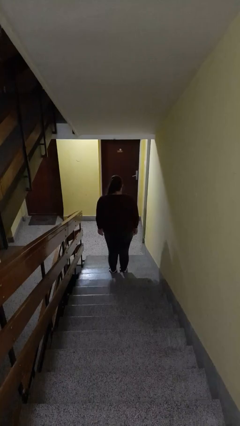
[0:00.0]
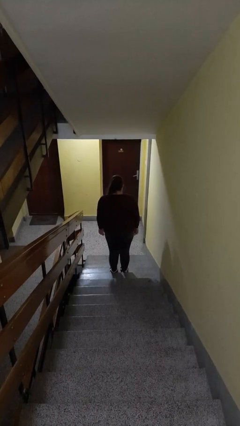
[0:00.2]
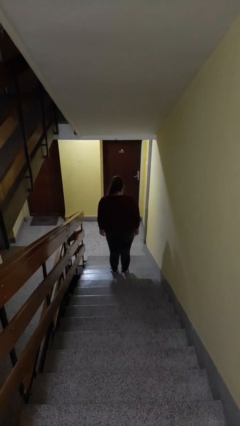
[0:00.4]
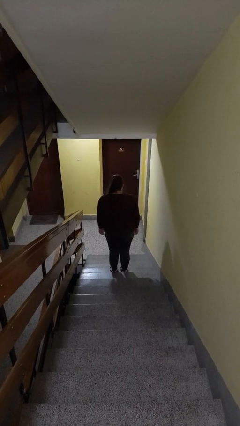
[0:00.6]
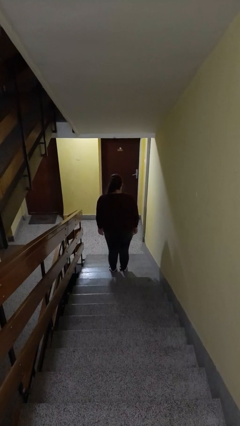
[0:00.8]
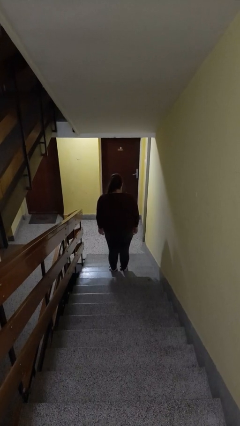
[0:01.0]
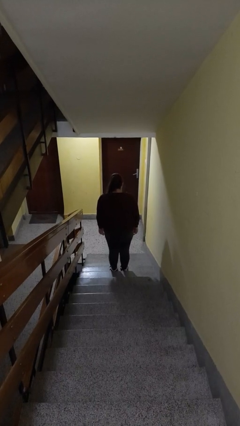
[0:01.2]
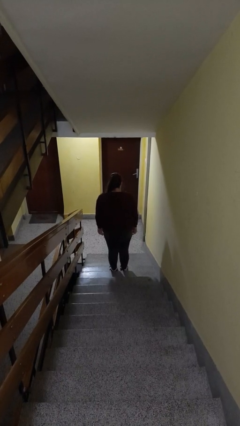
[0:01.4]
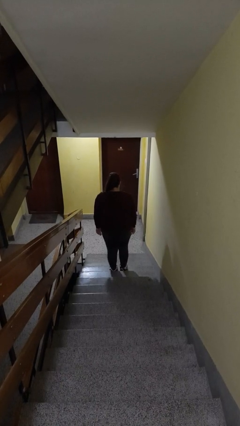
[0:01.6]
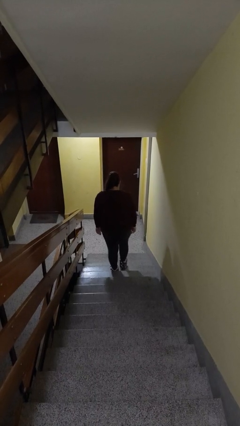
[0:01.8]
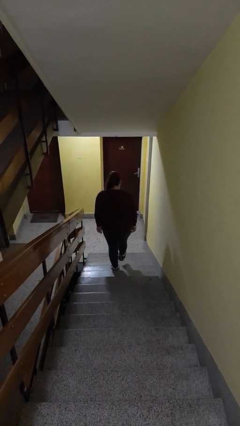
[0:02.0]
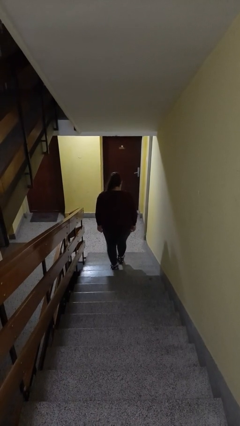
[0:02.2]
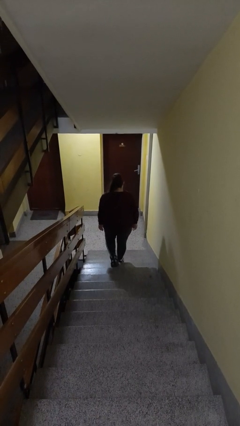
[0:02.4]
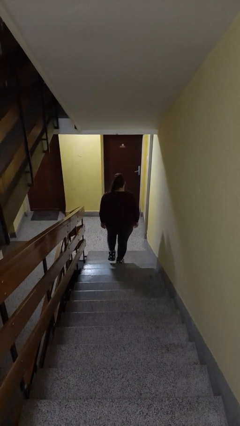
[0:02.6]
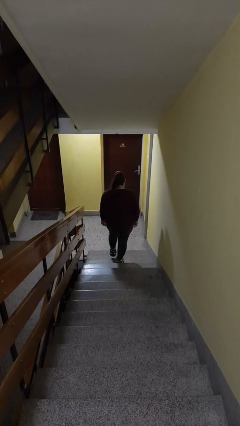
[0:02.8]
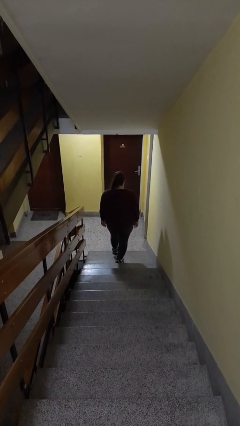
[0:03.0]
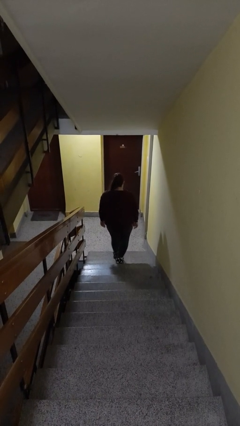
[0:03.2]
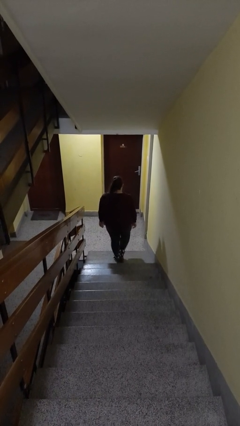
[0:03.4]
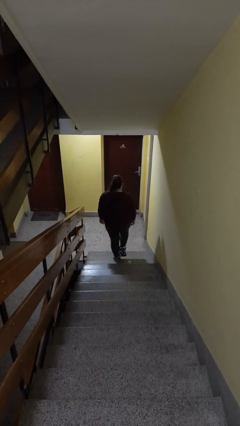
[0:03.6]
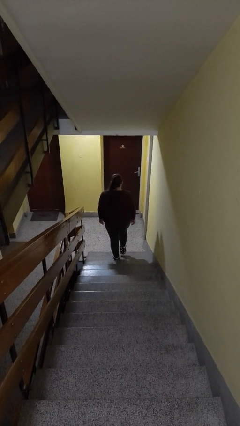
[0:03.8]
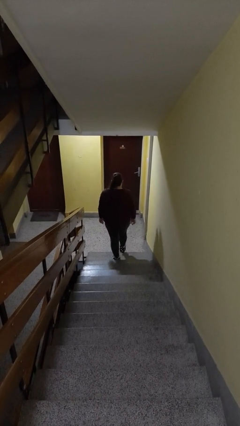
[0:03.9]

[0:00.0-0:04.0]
person climbs down stairs

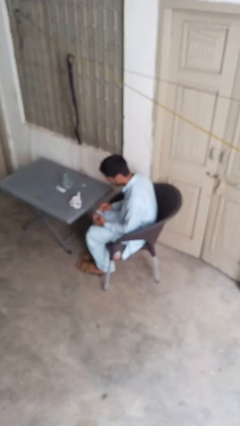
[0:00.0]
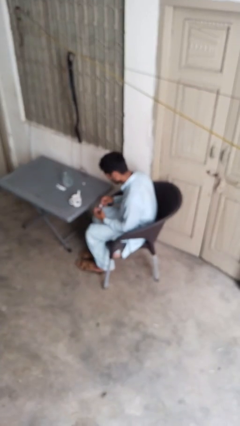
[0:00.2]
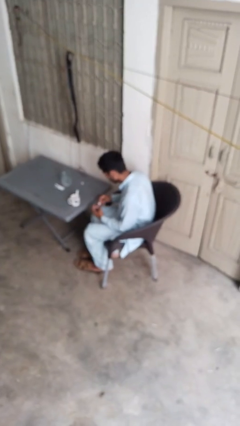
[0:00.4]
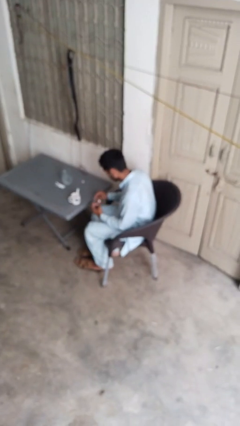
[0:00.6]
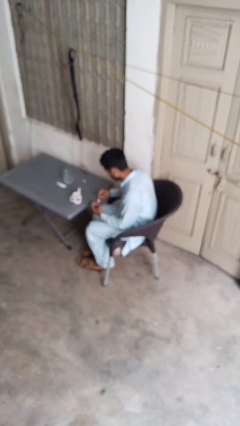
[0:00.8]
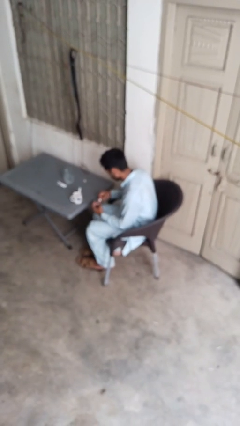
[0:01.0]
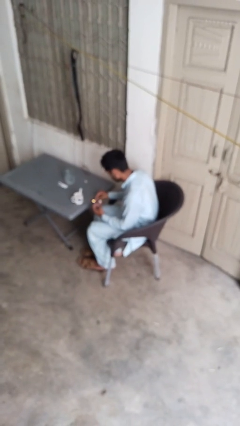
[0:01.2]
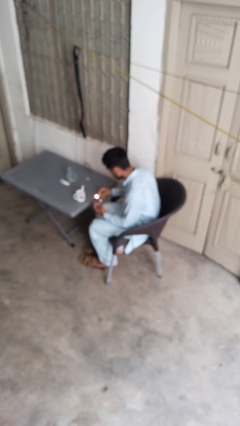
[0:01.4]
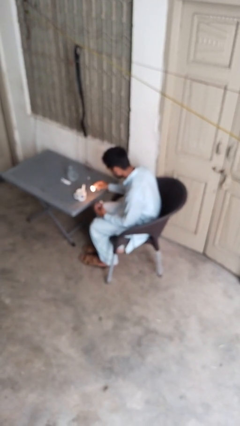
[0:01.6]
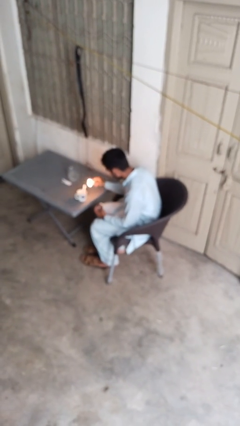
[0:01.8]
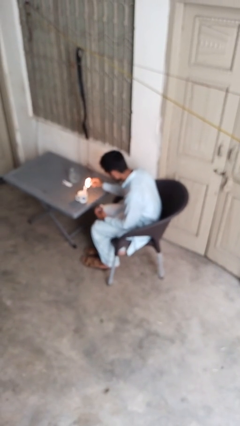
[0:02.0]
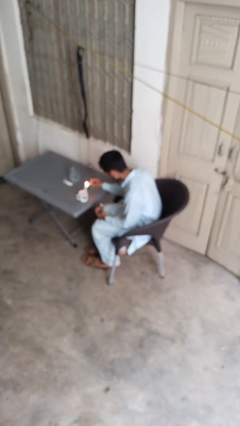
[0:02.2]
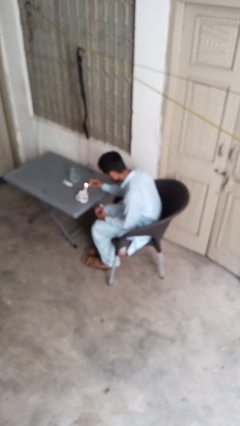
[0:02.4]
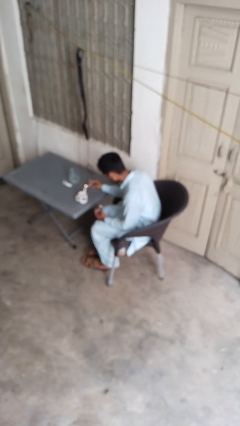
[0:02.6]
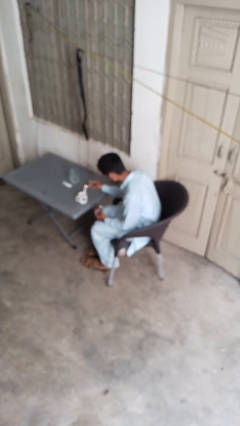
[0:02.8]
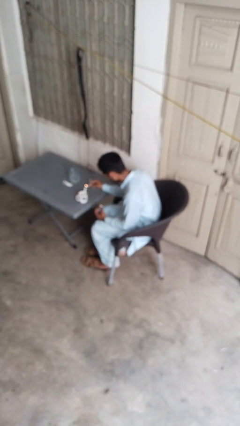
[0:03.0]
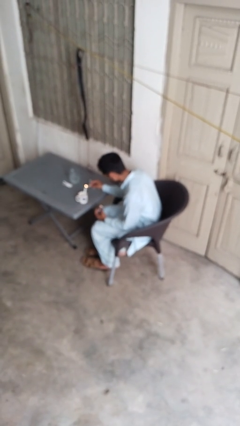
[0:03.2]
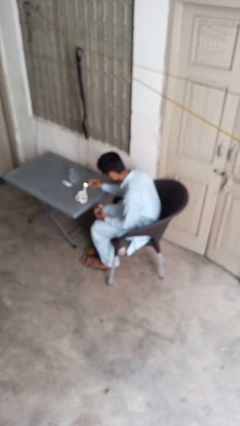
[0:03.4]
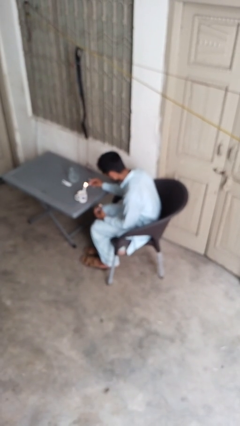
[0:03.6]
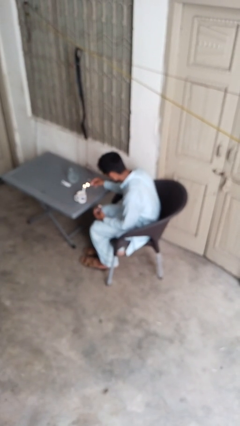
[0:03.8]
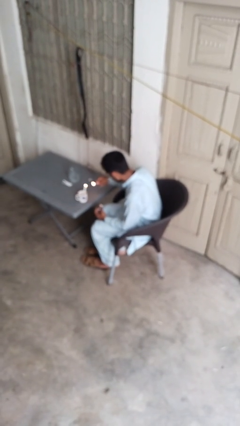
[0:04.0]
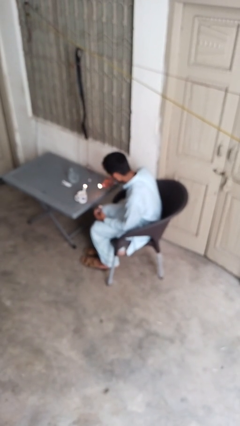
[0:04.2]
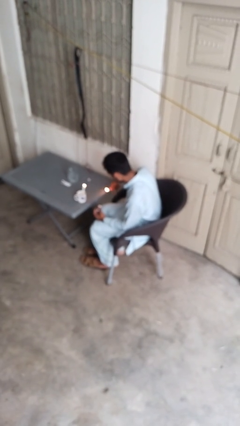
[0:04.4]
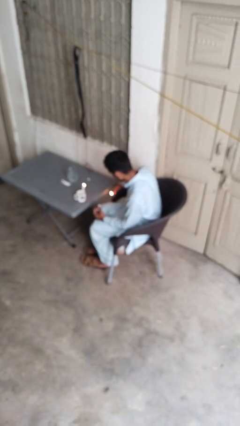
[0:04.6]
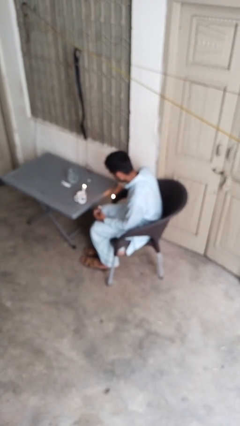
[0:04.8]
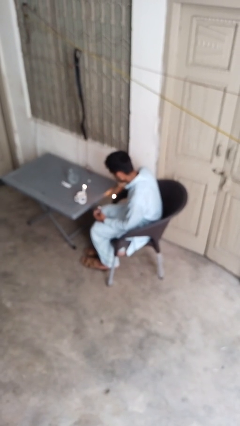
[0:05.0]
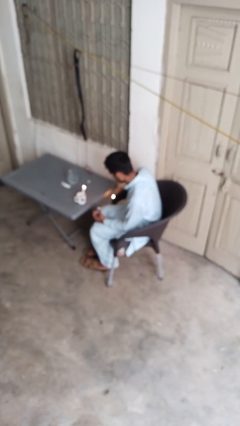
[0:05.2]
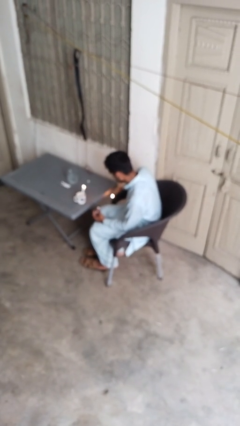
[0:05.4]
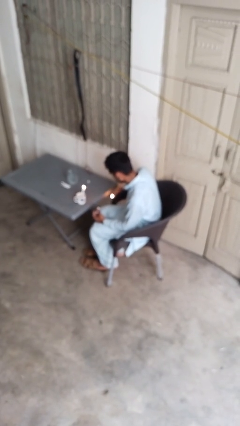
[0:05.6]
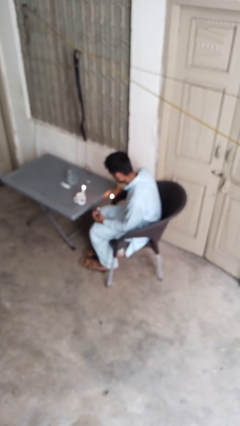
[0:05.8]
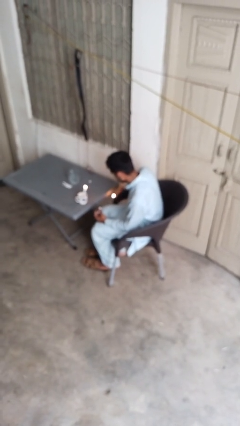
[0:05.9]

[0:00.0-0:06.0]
person lights candle

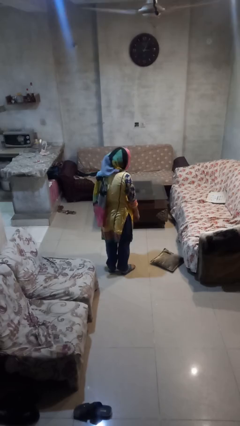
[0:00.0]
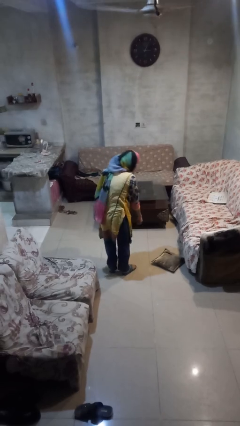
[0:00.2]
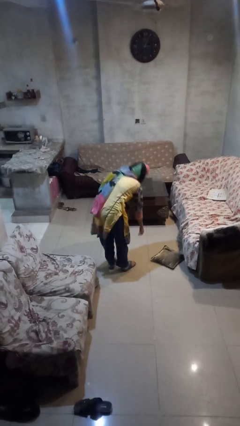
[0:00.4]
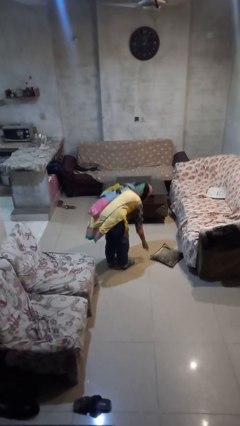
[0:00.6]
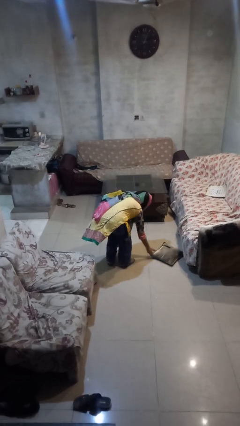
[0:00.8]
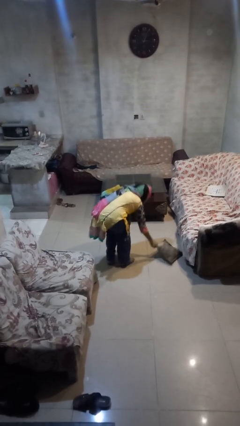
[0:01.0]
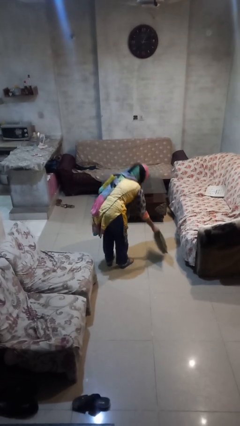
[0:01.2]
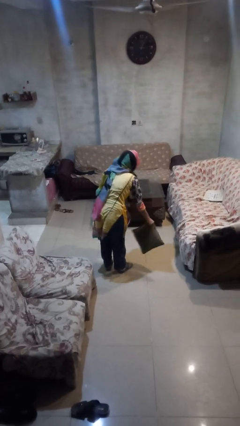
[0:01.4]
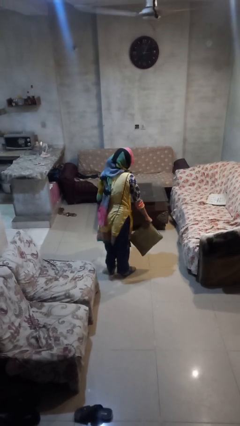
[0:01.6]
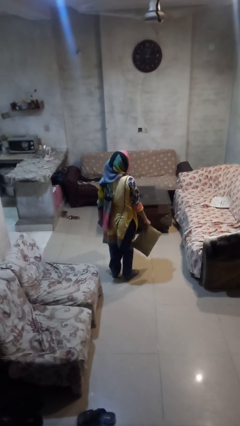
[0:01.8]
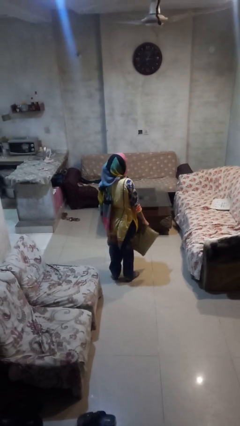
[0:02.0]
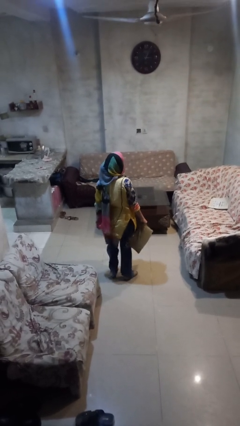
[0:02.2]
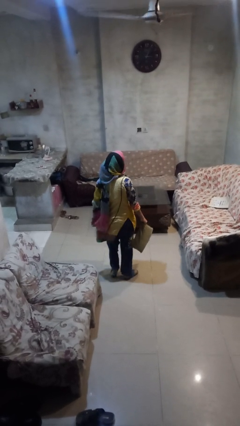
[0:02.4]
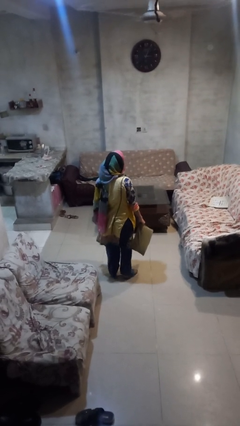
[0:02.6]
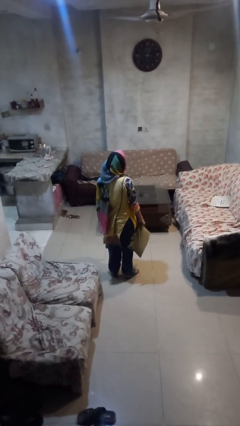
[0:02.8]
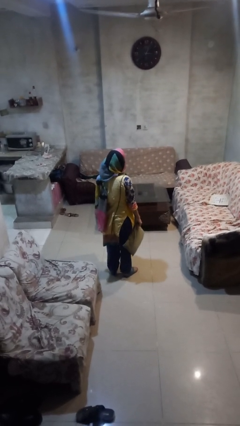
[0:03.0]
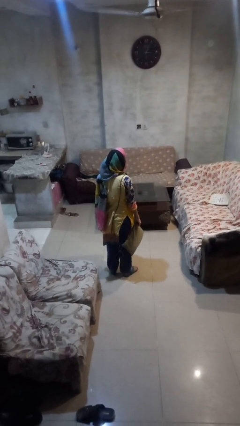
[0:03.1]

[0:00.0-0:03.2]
person picks up object from floor

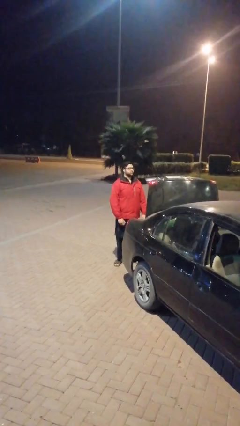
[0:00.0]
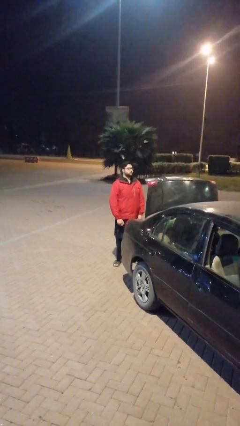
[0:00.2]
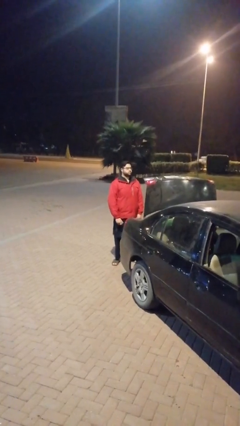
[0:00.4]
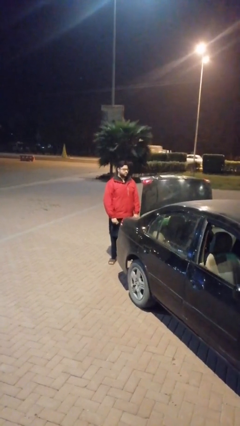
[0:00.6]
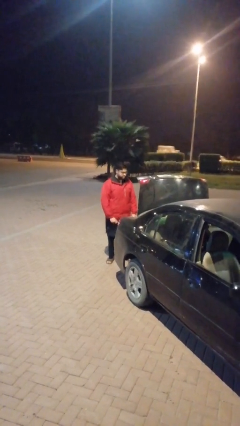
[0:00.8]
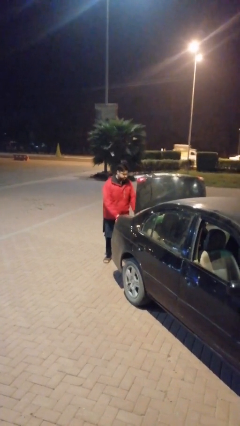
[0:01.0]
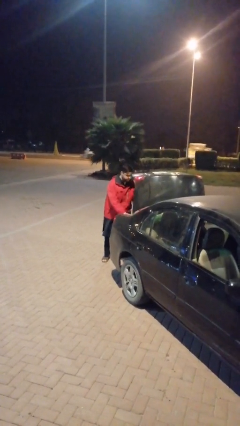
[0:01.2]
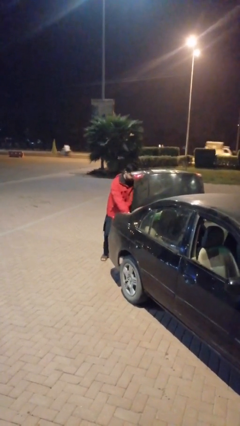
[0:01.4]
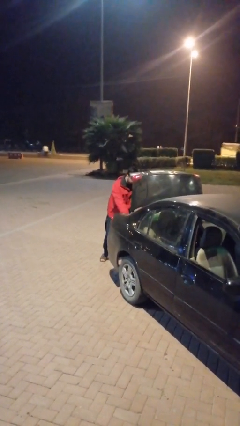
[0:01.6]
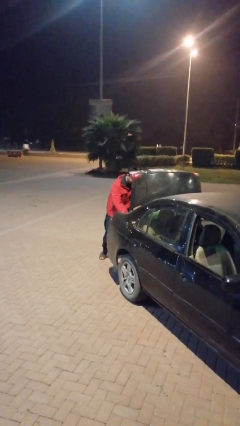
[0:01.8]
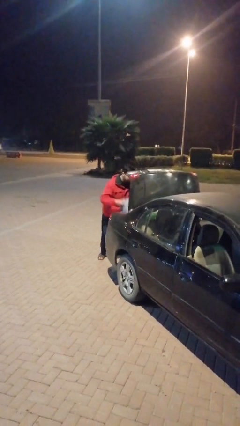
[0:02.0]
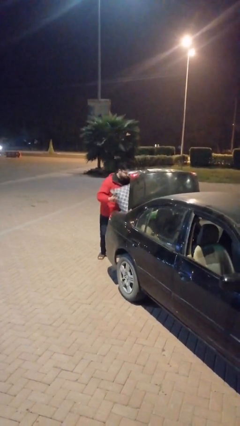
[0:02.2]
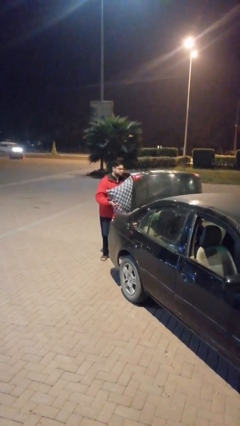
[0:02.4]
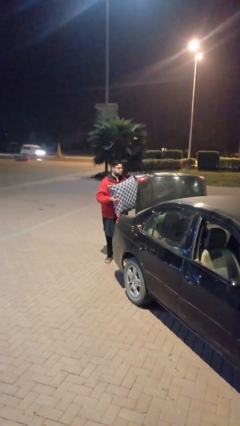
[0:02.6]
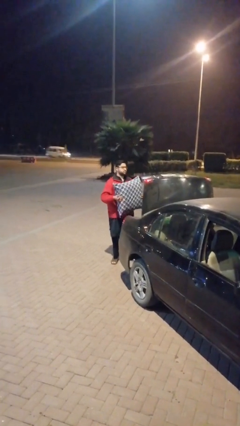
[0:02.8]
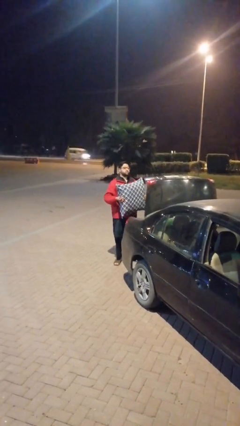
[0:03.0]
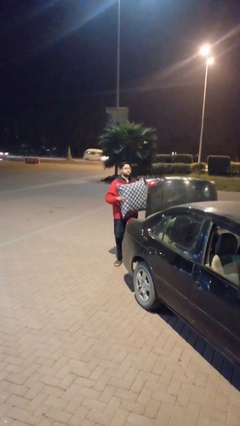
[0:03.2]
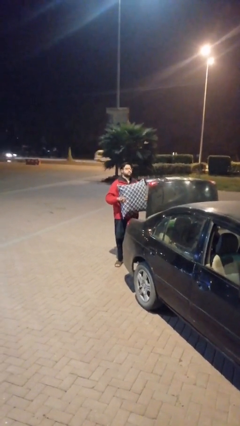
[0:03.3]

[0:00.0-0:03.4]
person unloads car

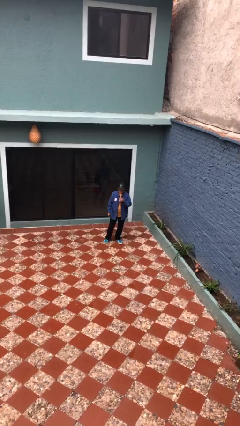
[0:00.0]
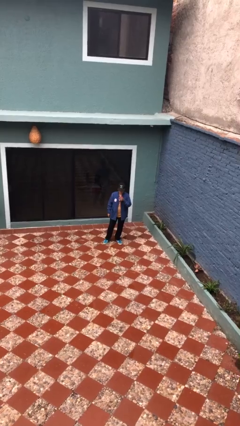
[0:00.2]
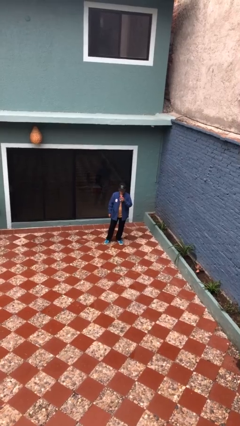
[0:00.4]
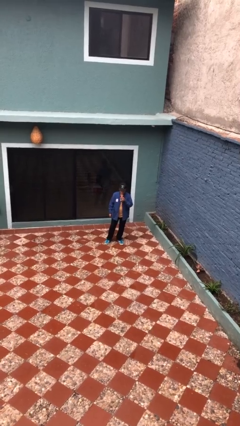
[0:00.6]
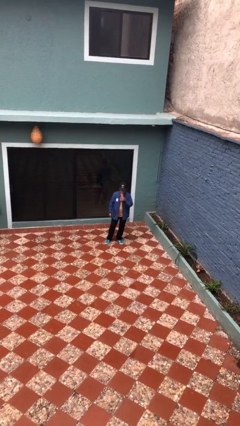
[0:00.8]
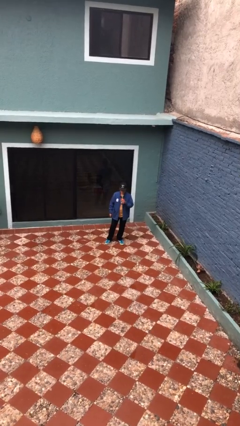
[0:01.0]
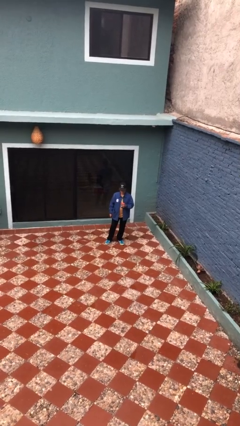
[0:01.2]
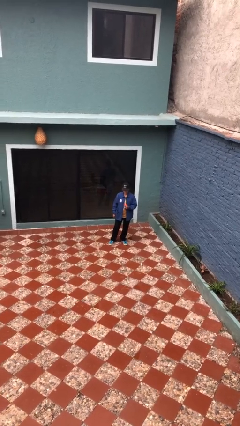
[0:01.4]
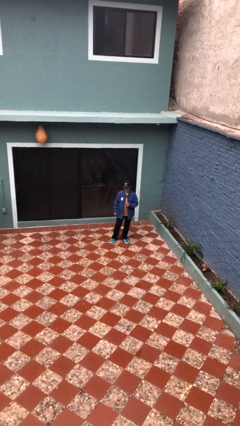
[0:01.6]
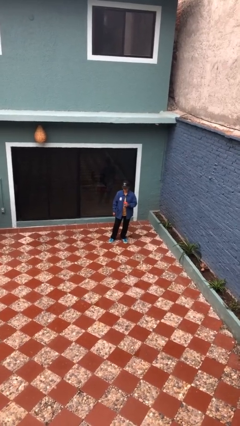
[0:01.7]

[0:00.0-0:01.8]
person drinks from straw
